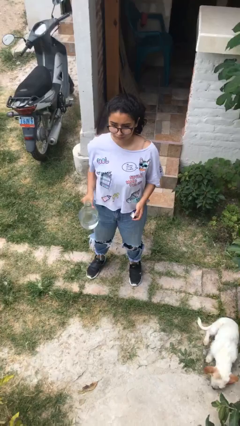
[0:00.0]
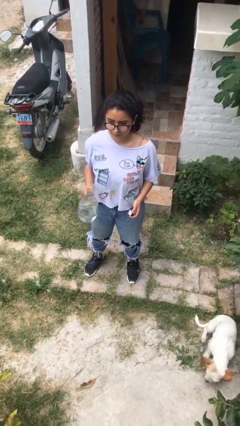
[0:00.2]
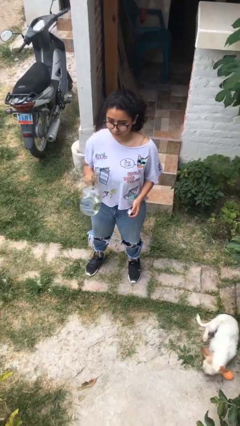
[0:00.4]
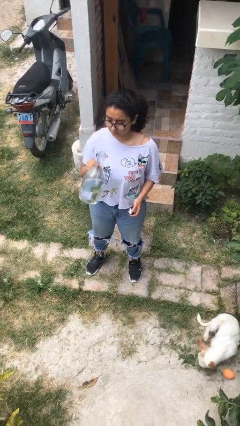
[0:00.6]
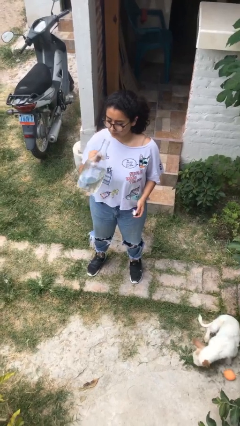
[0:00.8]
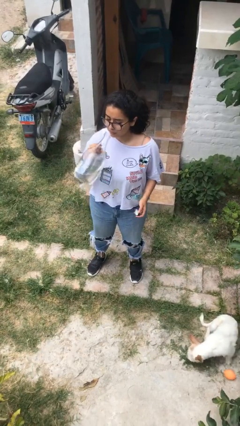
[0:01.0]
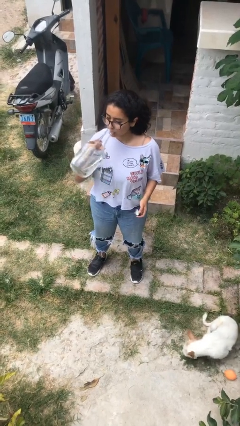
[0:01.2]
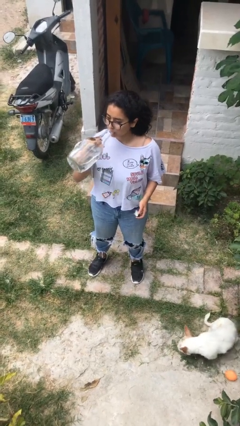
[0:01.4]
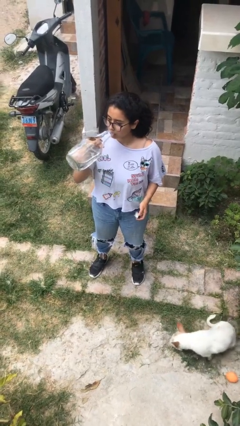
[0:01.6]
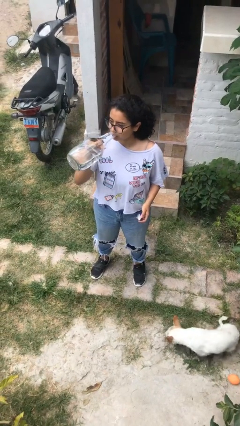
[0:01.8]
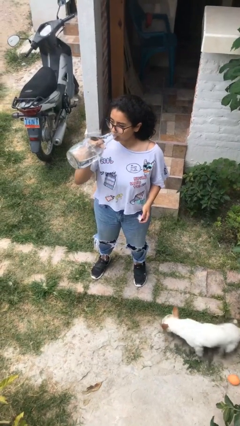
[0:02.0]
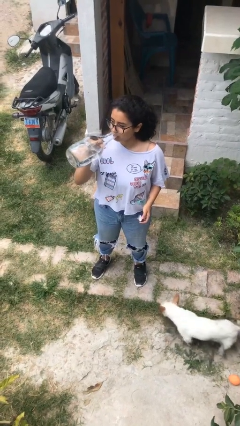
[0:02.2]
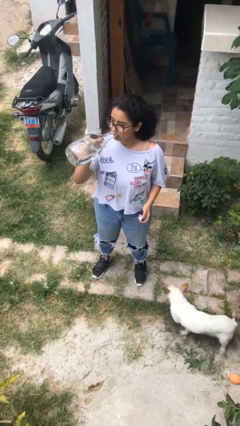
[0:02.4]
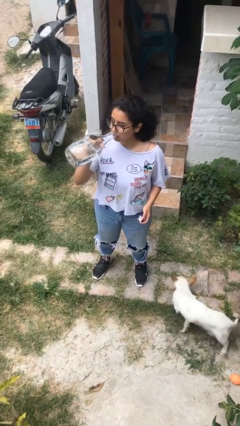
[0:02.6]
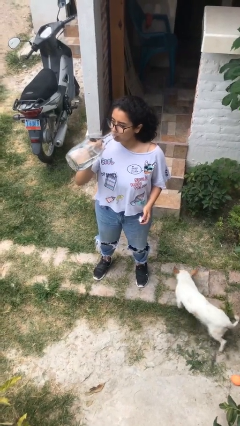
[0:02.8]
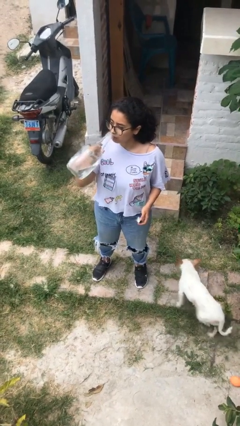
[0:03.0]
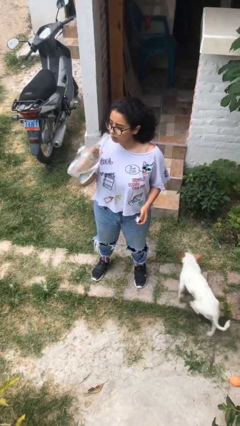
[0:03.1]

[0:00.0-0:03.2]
person drinks from bottle

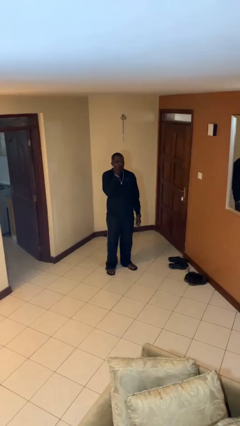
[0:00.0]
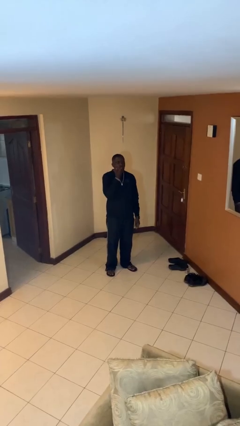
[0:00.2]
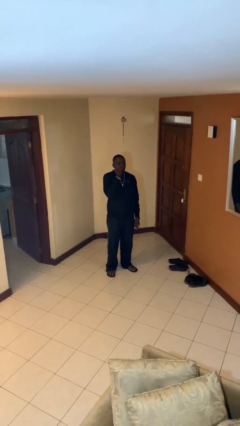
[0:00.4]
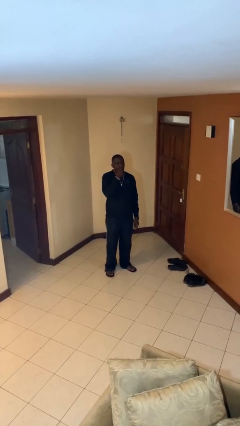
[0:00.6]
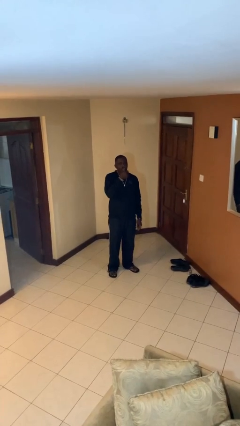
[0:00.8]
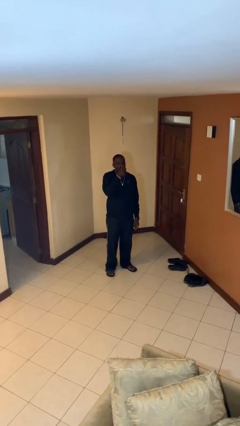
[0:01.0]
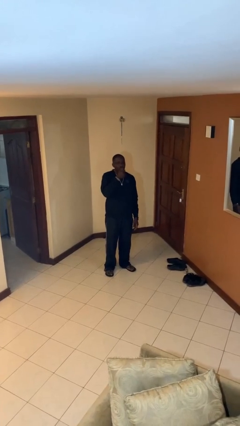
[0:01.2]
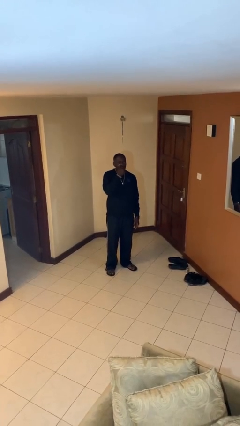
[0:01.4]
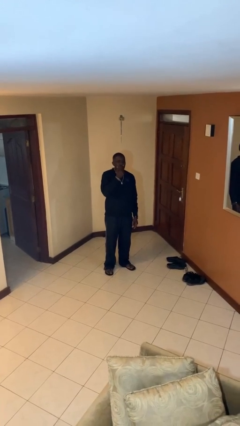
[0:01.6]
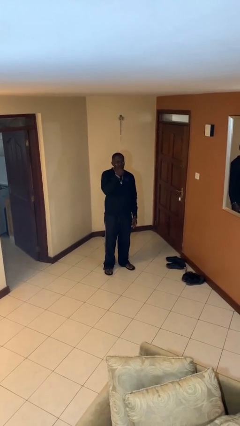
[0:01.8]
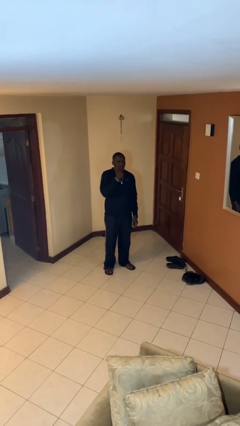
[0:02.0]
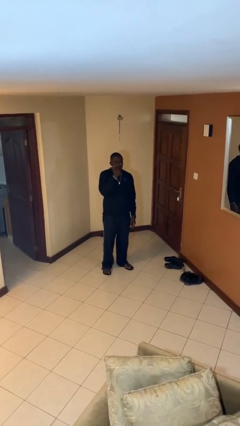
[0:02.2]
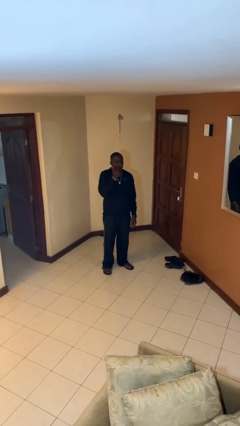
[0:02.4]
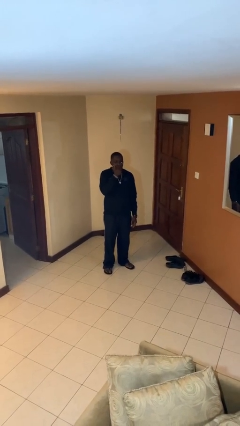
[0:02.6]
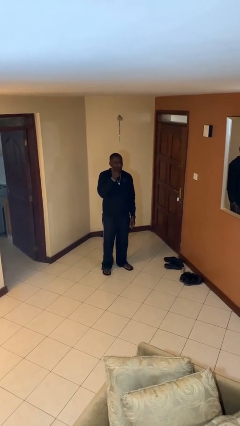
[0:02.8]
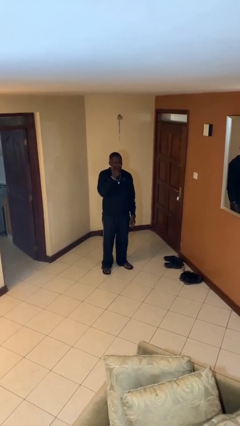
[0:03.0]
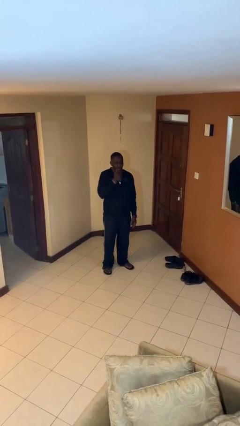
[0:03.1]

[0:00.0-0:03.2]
person licks fingers

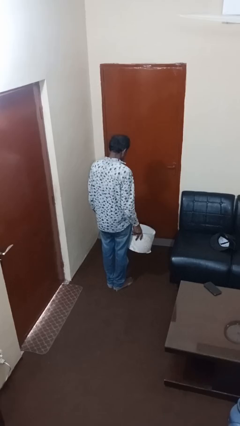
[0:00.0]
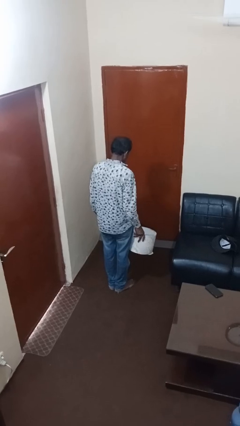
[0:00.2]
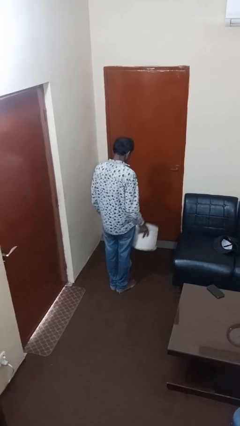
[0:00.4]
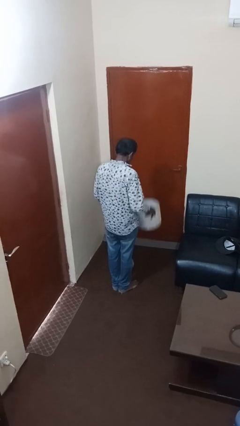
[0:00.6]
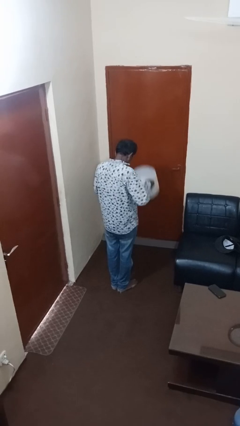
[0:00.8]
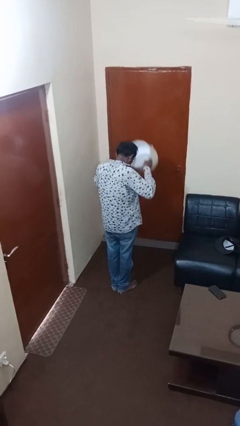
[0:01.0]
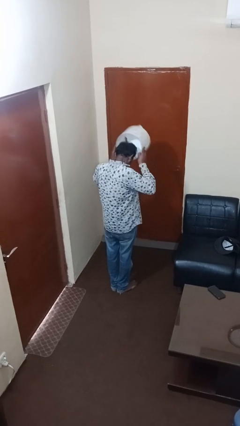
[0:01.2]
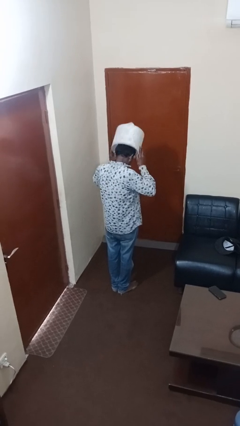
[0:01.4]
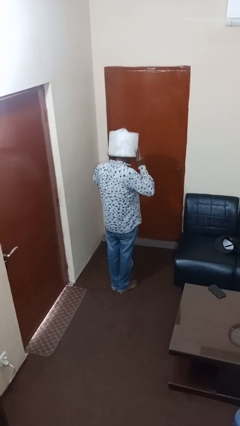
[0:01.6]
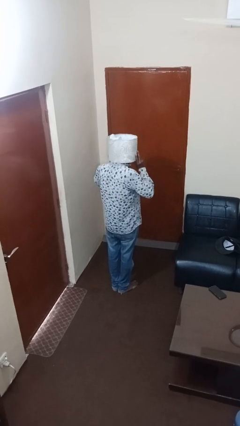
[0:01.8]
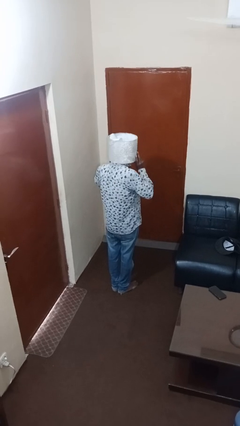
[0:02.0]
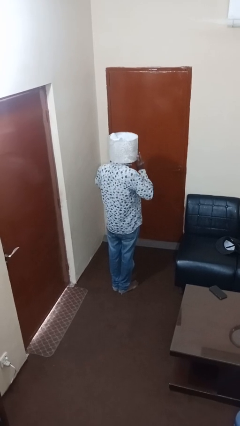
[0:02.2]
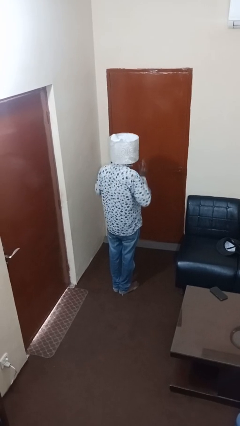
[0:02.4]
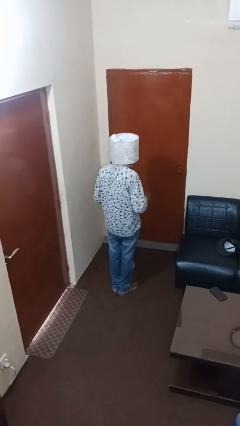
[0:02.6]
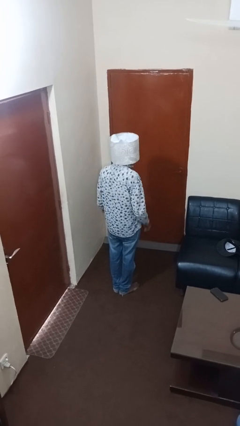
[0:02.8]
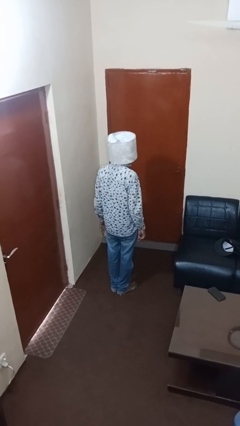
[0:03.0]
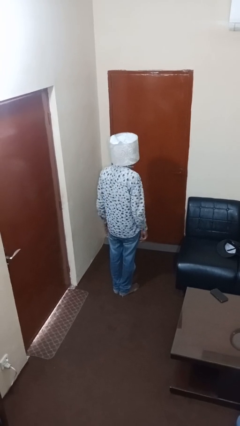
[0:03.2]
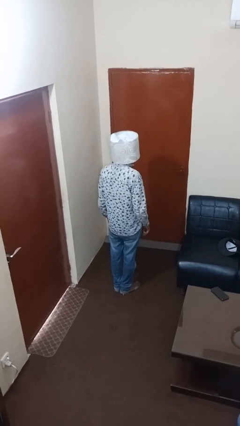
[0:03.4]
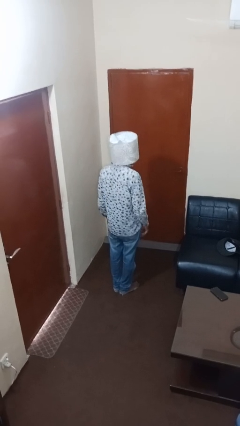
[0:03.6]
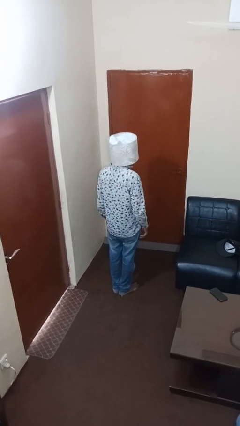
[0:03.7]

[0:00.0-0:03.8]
person puts on hat

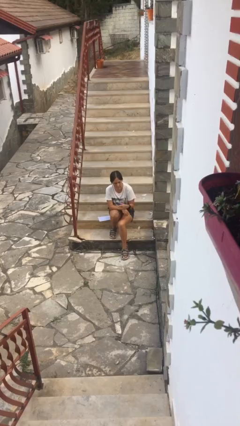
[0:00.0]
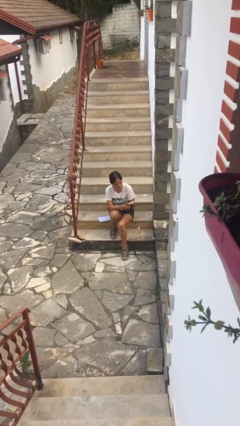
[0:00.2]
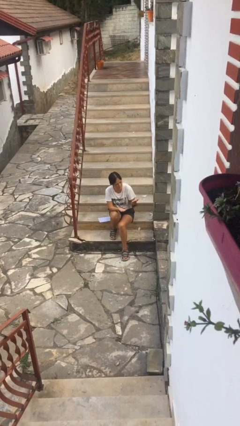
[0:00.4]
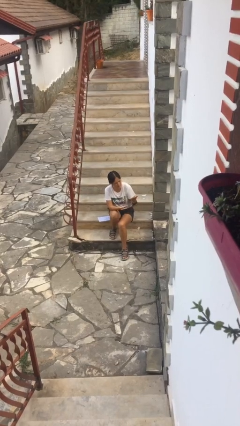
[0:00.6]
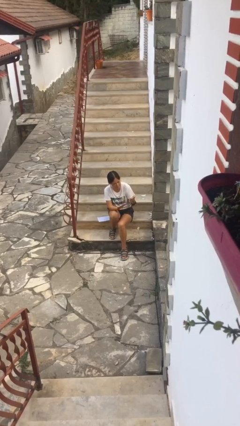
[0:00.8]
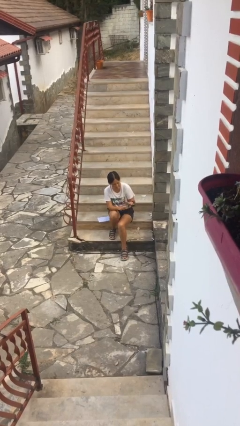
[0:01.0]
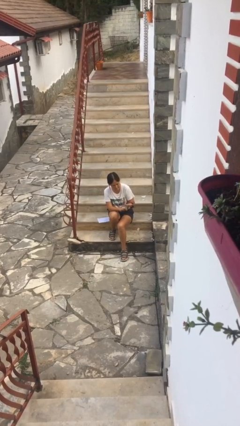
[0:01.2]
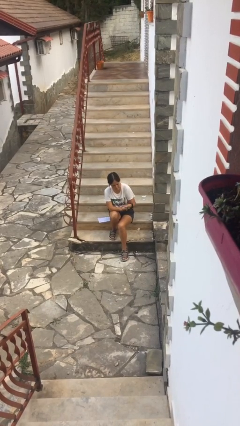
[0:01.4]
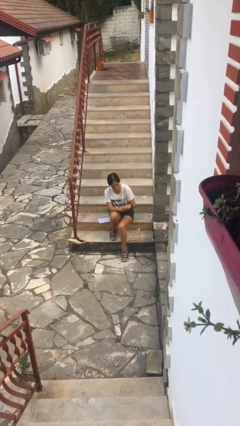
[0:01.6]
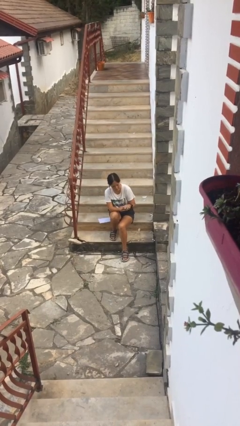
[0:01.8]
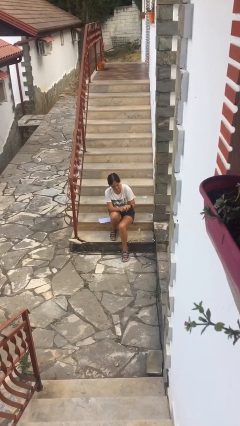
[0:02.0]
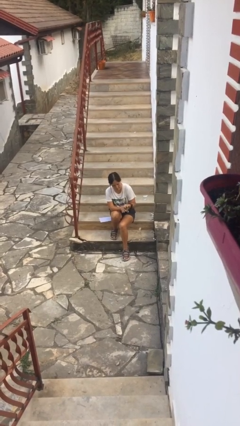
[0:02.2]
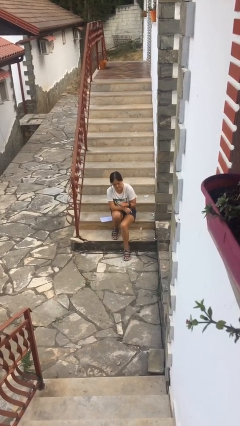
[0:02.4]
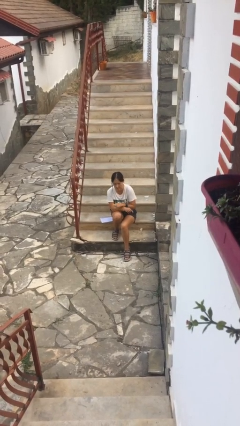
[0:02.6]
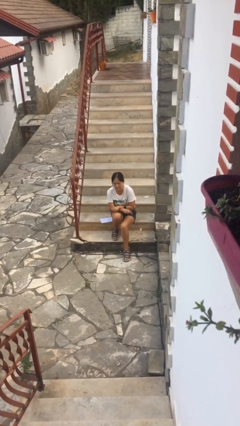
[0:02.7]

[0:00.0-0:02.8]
person looks at hands in lap

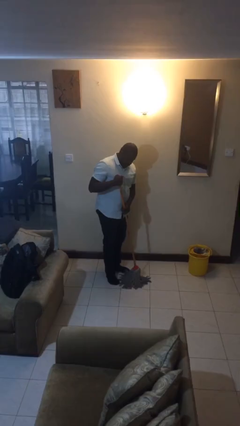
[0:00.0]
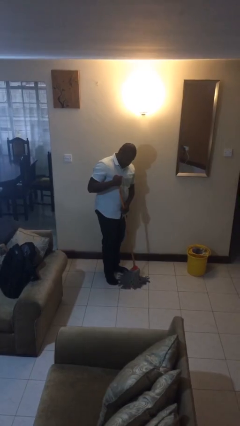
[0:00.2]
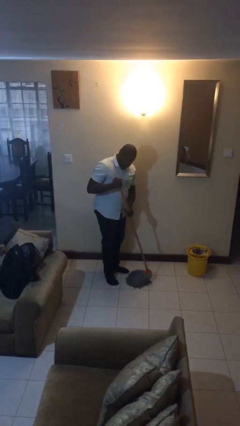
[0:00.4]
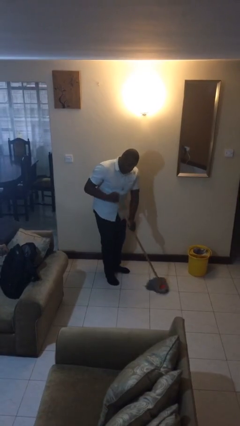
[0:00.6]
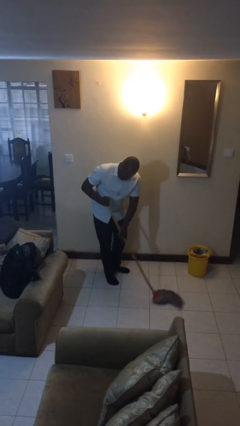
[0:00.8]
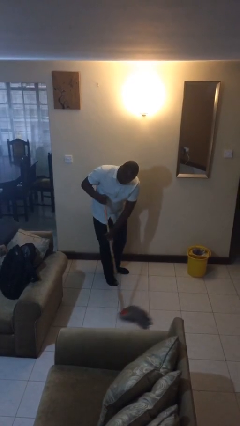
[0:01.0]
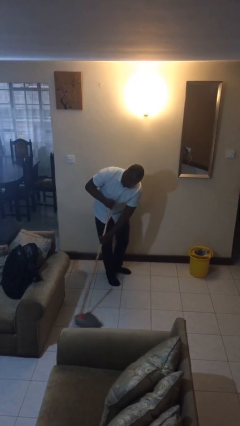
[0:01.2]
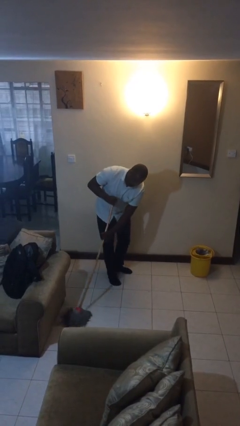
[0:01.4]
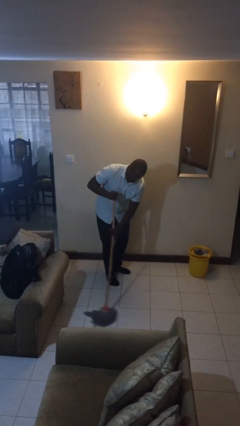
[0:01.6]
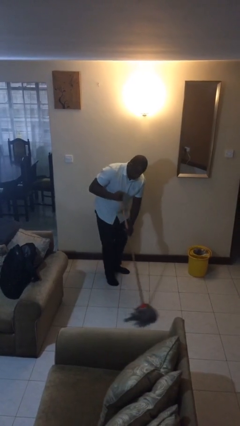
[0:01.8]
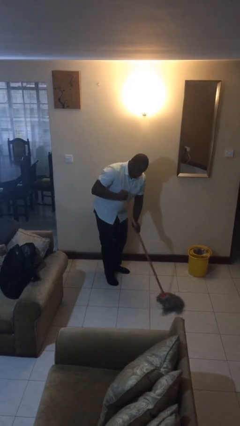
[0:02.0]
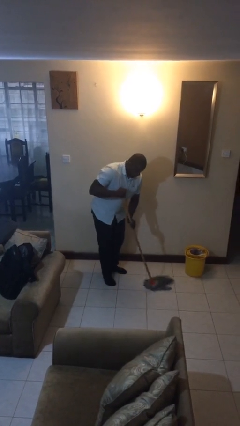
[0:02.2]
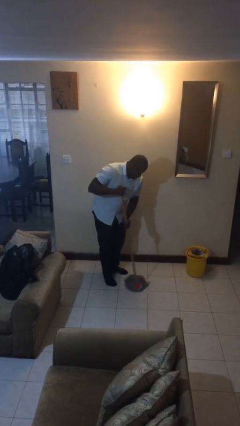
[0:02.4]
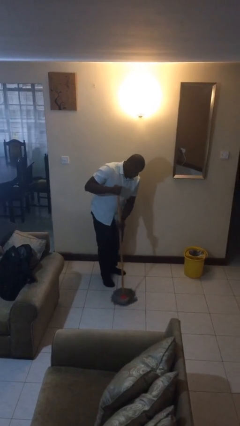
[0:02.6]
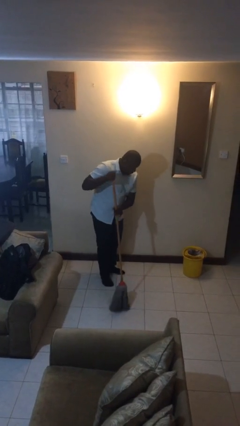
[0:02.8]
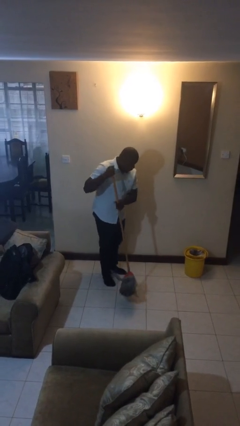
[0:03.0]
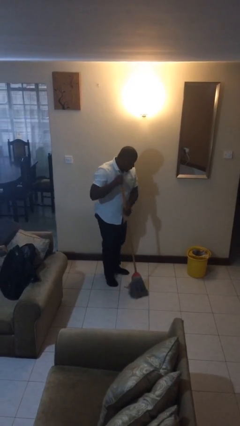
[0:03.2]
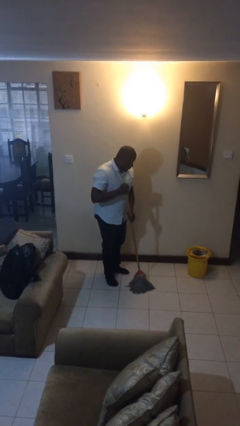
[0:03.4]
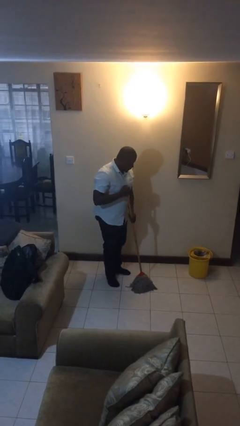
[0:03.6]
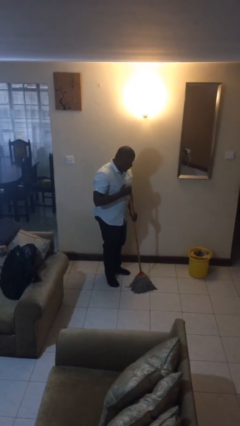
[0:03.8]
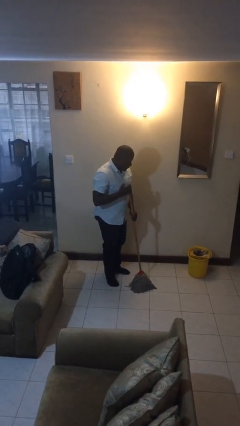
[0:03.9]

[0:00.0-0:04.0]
person mops
